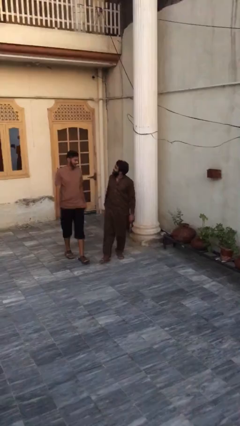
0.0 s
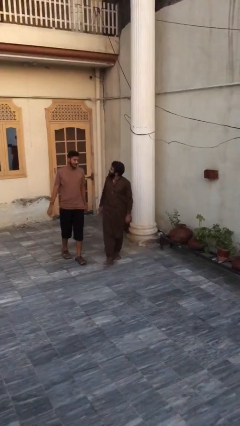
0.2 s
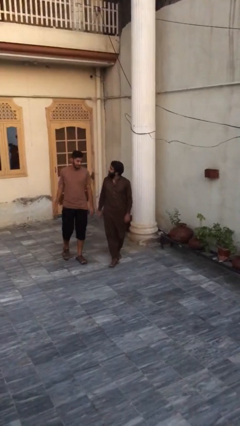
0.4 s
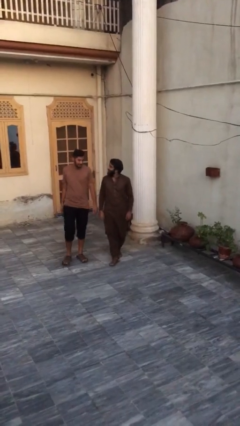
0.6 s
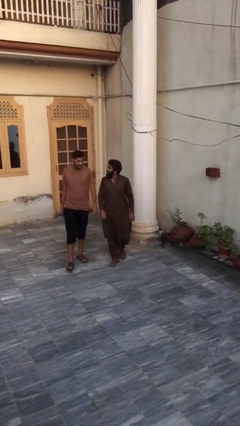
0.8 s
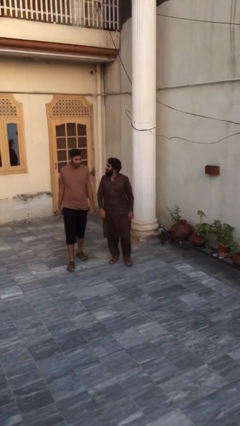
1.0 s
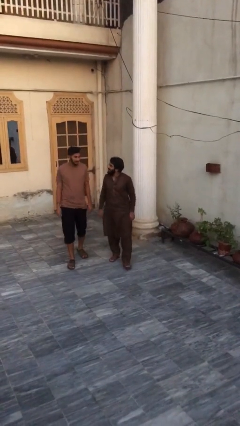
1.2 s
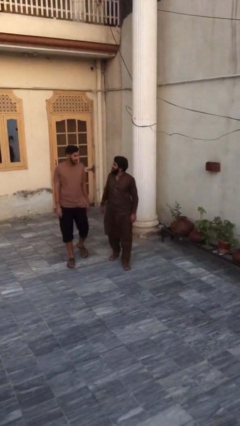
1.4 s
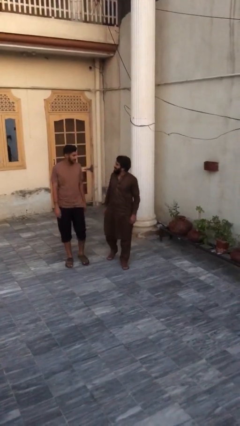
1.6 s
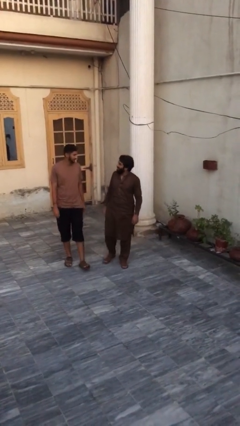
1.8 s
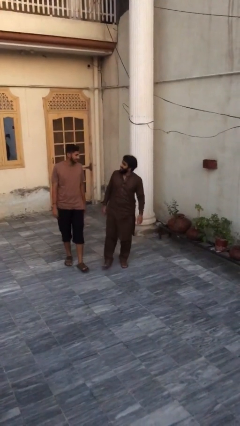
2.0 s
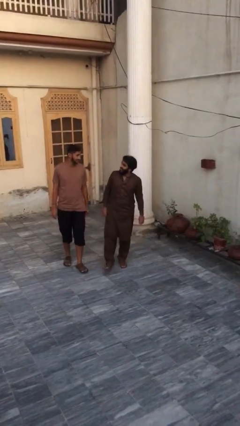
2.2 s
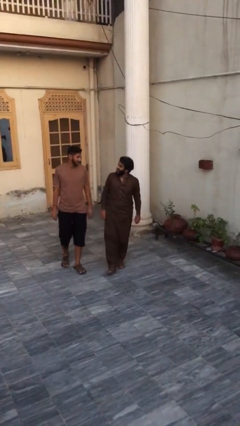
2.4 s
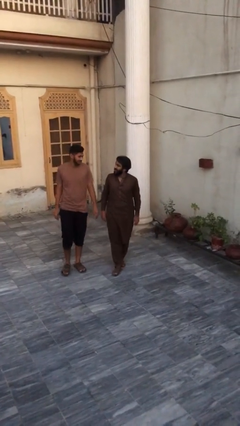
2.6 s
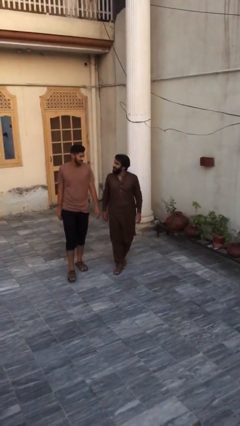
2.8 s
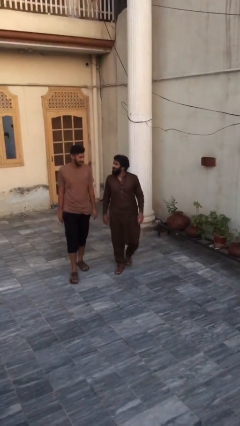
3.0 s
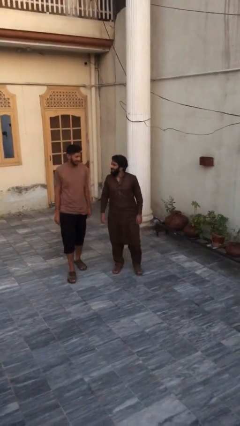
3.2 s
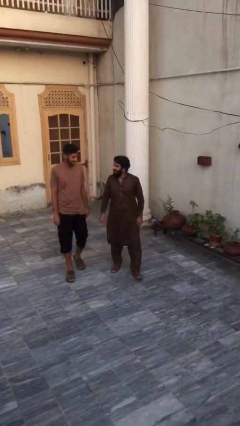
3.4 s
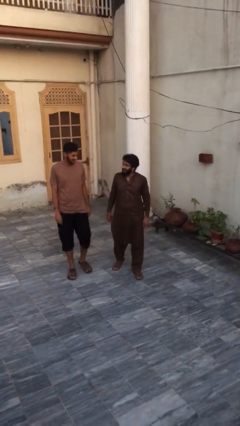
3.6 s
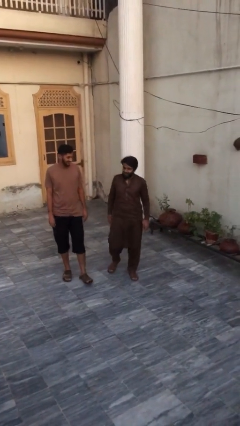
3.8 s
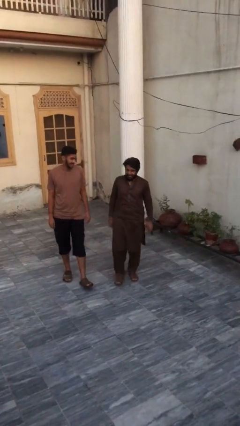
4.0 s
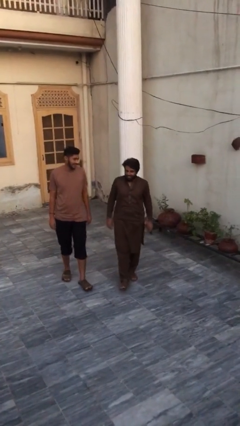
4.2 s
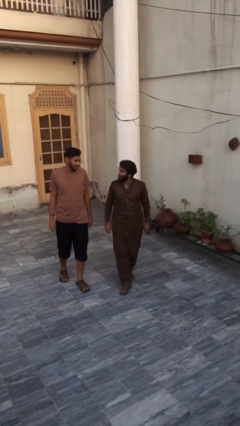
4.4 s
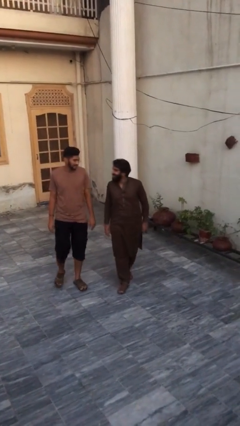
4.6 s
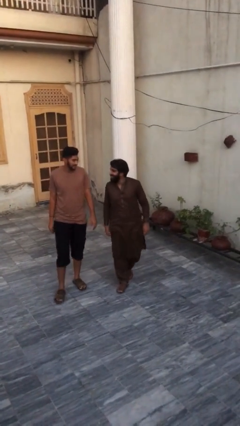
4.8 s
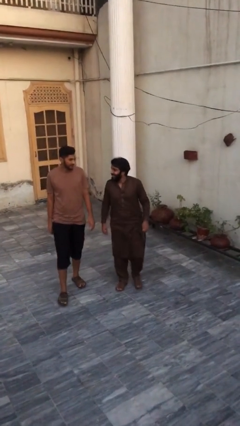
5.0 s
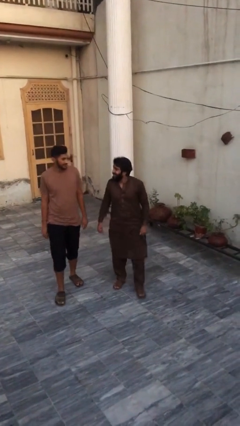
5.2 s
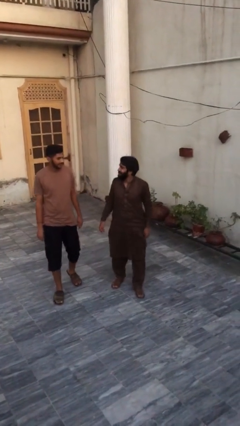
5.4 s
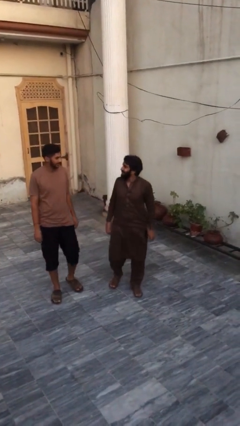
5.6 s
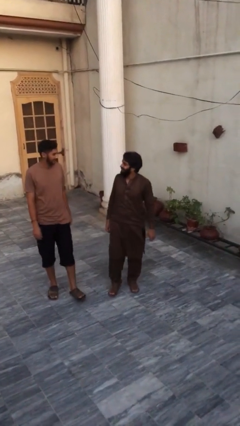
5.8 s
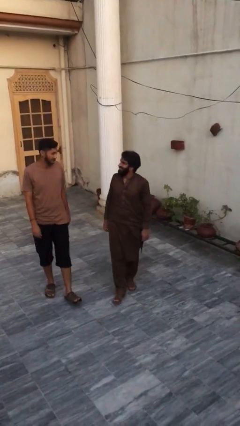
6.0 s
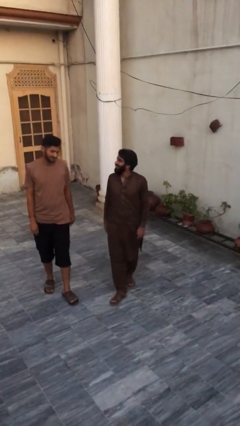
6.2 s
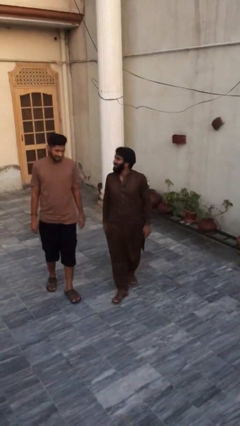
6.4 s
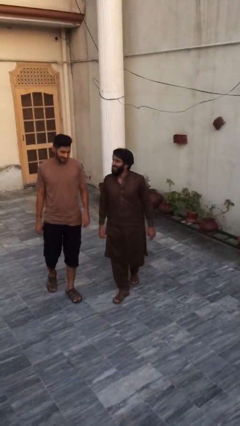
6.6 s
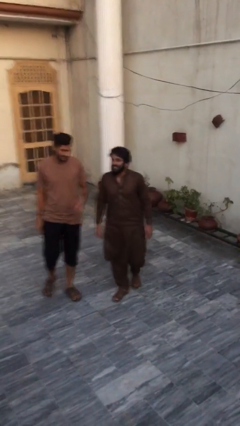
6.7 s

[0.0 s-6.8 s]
person talks to person

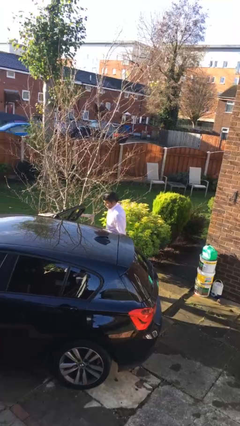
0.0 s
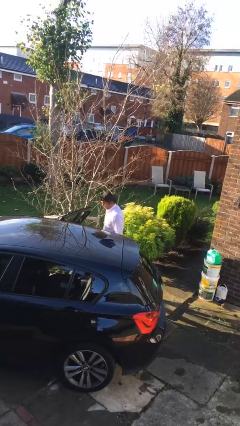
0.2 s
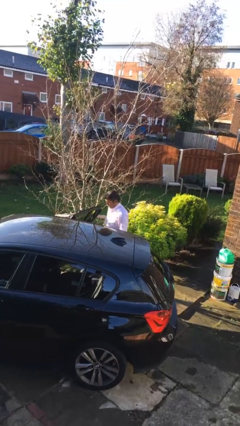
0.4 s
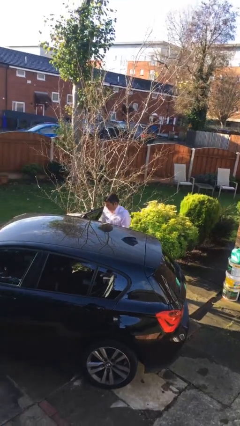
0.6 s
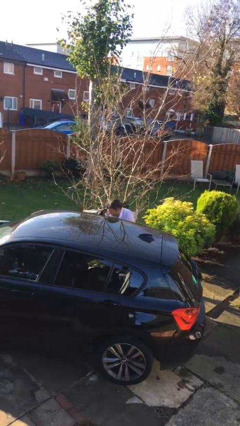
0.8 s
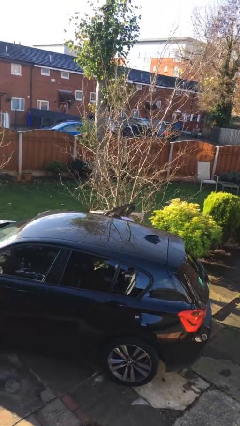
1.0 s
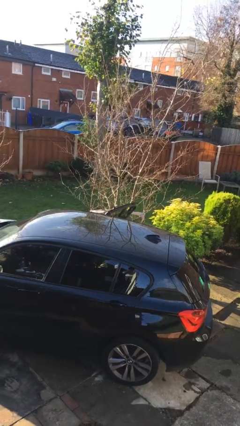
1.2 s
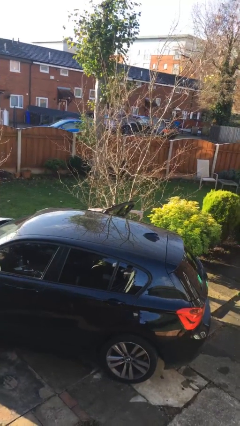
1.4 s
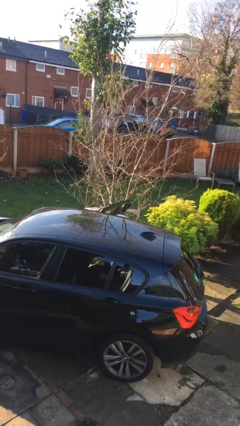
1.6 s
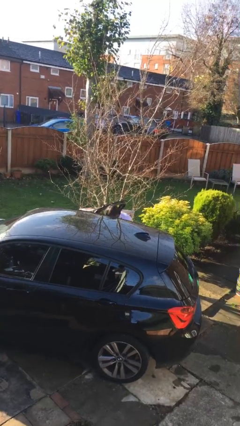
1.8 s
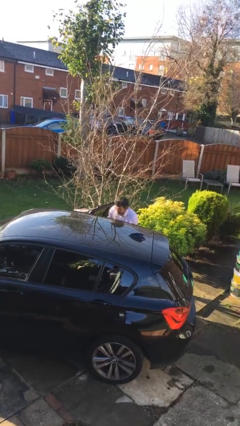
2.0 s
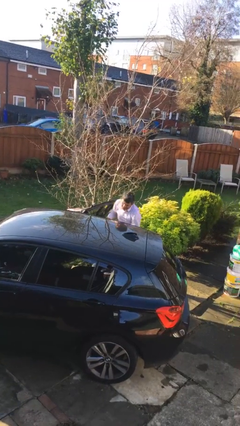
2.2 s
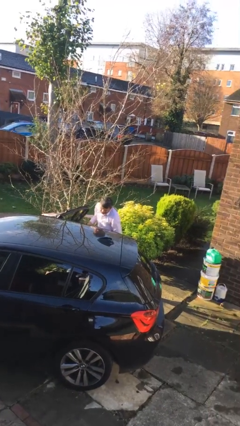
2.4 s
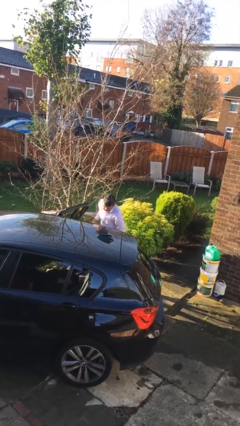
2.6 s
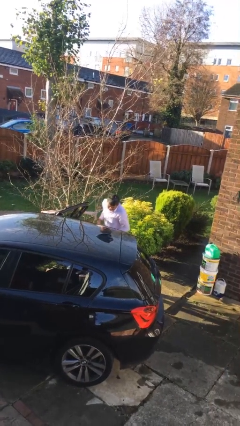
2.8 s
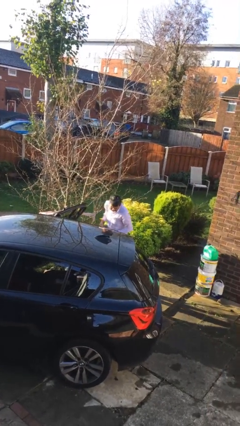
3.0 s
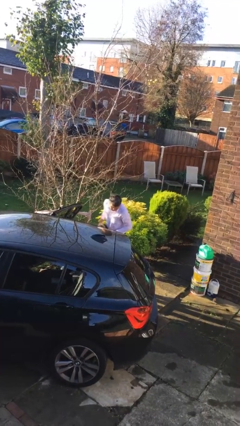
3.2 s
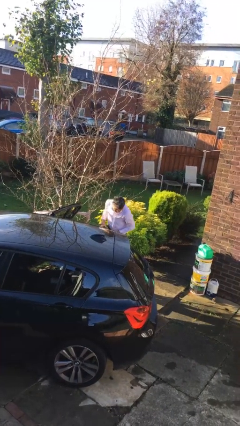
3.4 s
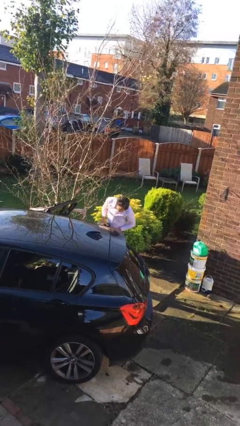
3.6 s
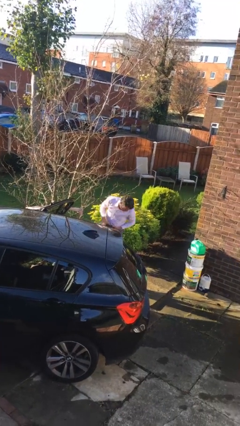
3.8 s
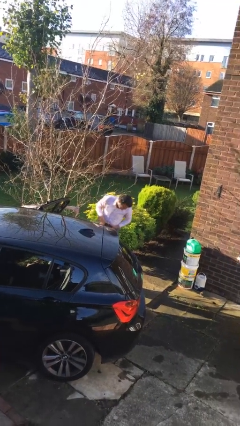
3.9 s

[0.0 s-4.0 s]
person unloads car

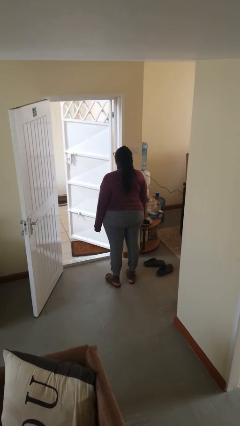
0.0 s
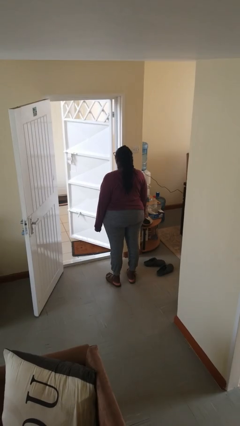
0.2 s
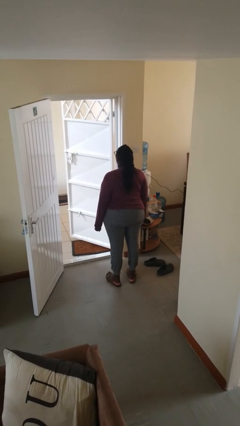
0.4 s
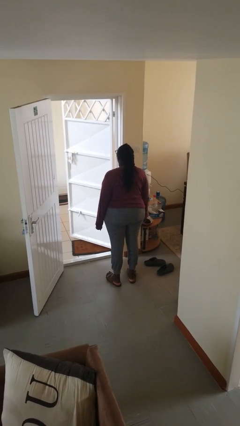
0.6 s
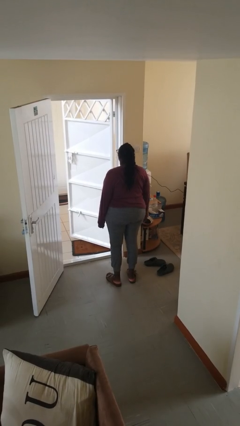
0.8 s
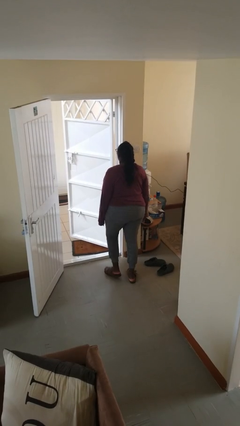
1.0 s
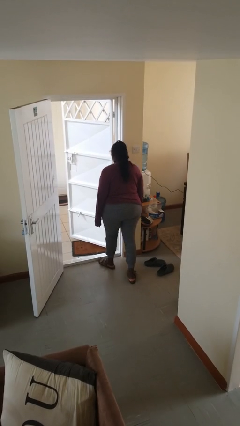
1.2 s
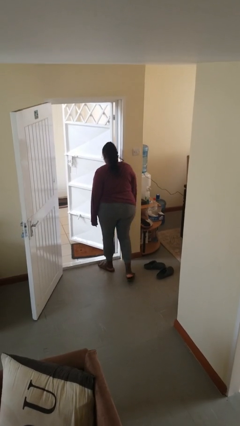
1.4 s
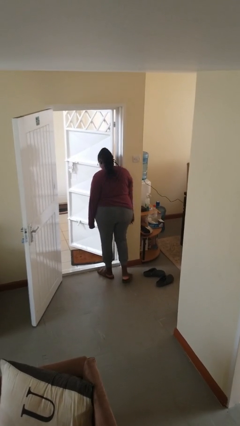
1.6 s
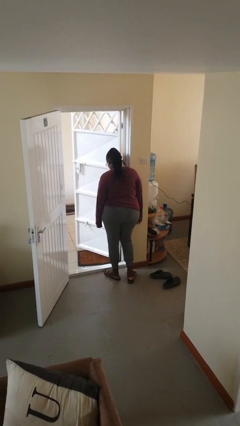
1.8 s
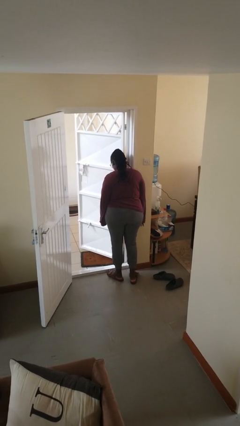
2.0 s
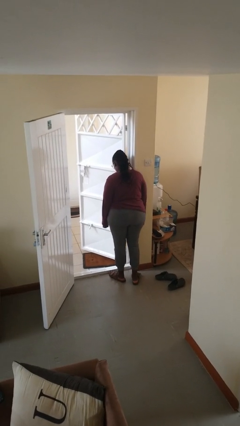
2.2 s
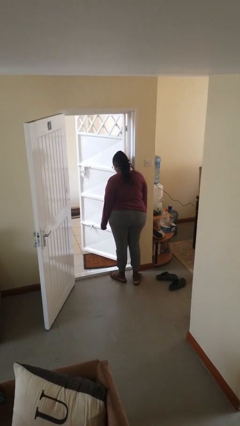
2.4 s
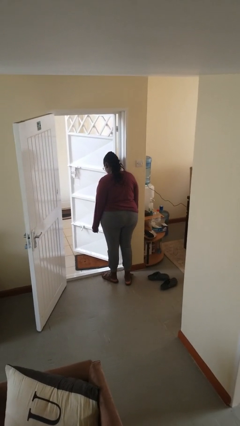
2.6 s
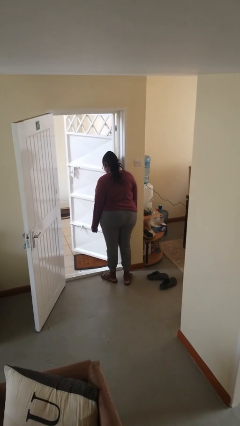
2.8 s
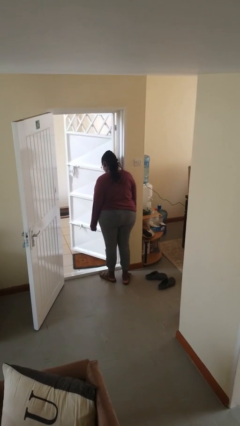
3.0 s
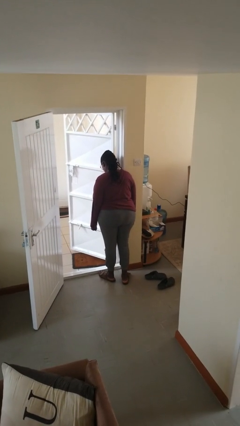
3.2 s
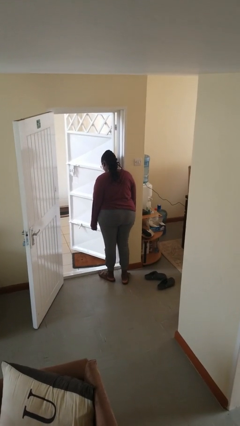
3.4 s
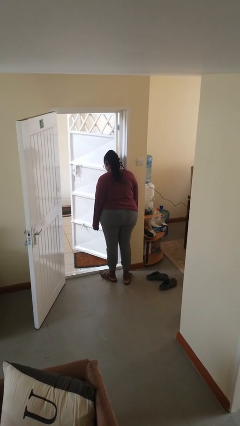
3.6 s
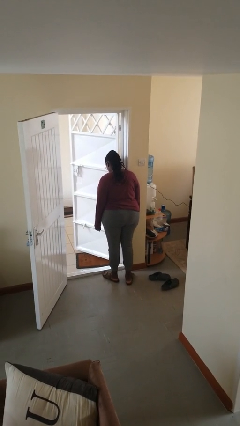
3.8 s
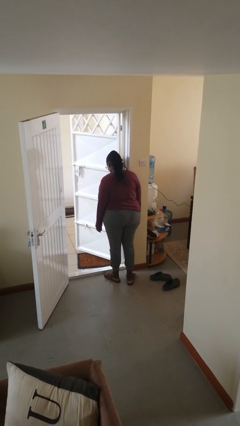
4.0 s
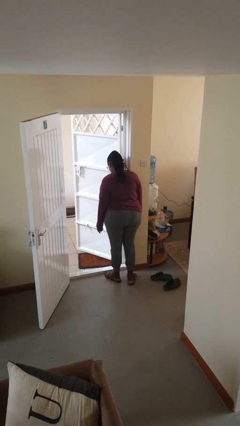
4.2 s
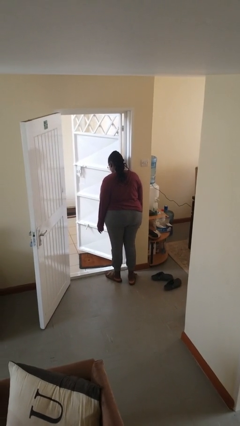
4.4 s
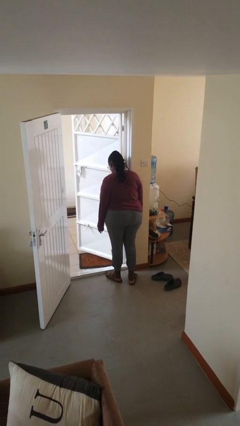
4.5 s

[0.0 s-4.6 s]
person bumps into wall

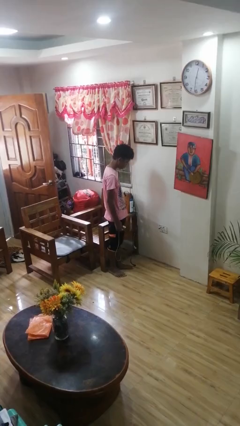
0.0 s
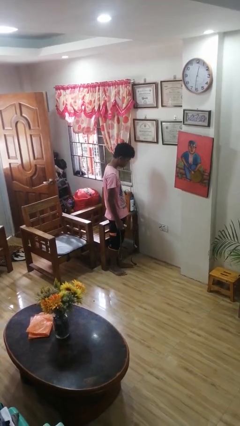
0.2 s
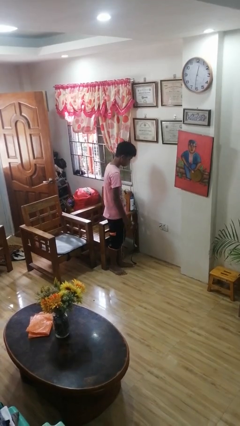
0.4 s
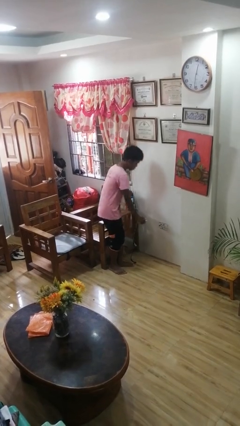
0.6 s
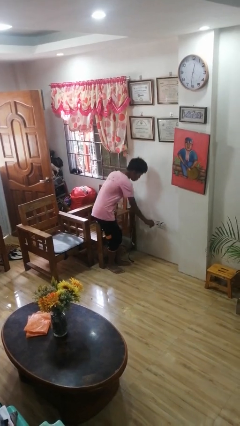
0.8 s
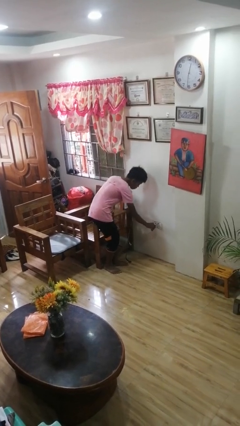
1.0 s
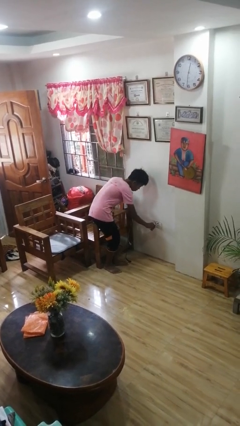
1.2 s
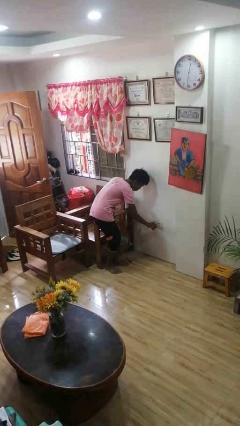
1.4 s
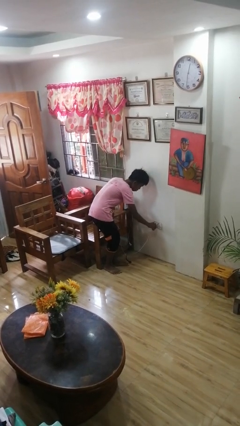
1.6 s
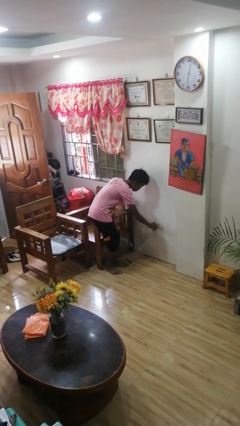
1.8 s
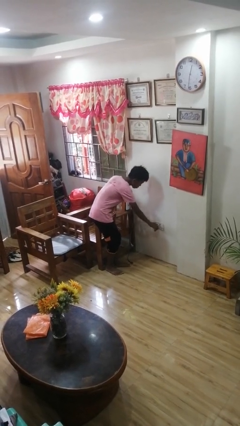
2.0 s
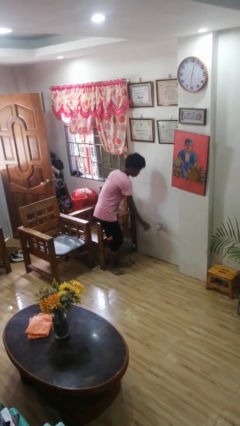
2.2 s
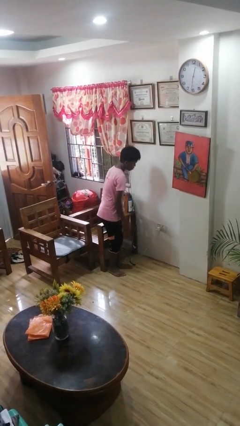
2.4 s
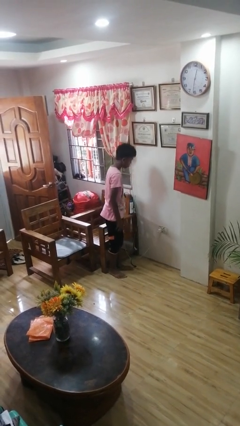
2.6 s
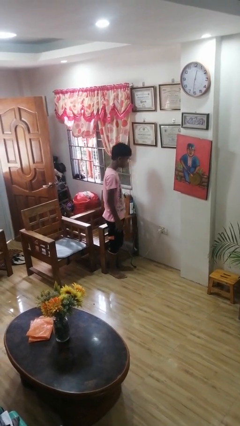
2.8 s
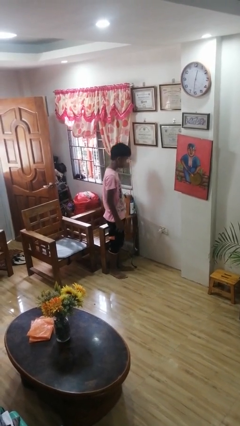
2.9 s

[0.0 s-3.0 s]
person plugs into electrical socket
